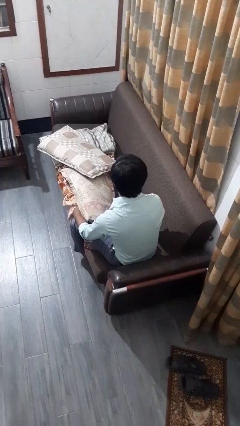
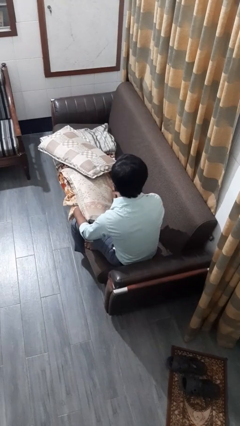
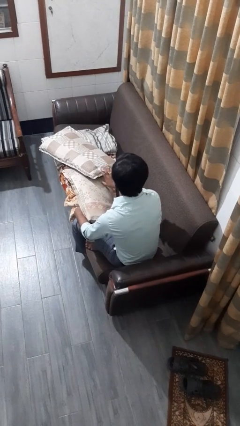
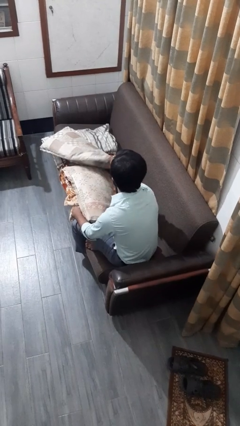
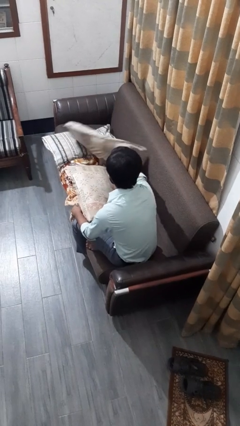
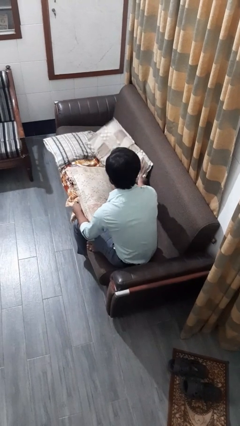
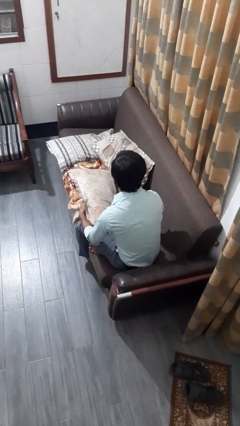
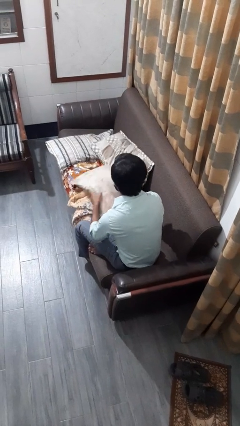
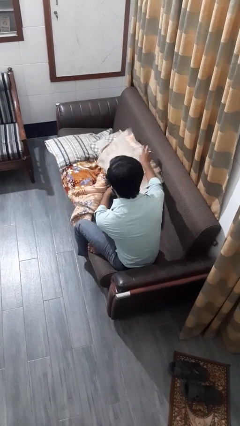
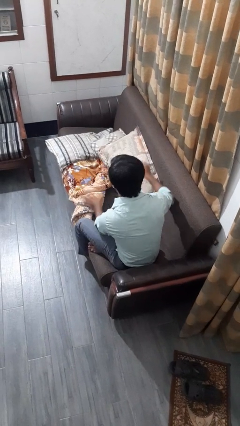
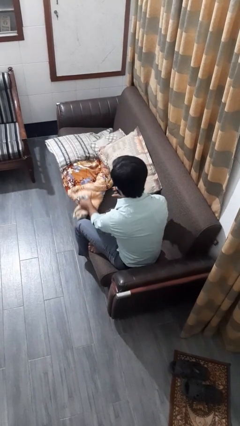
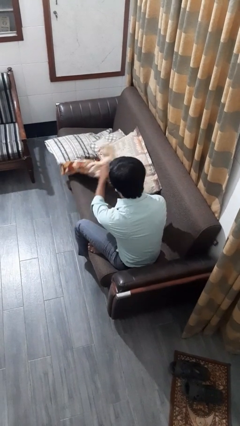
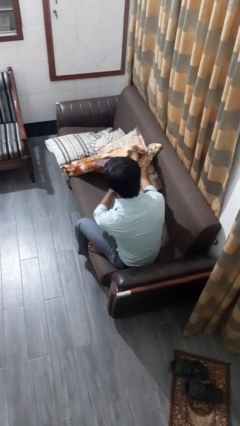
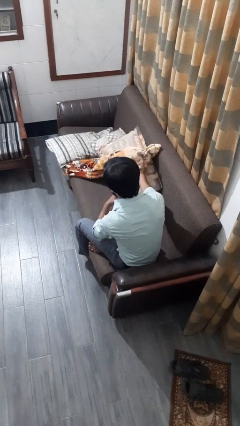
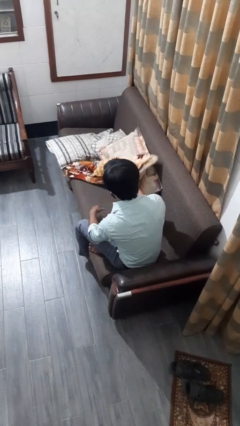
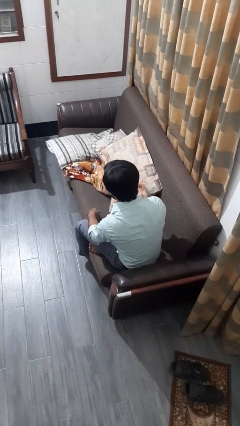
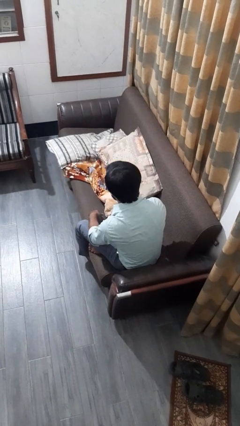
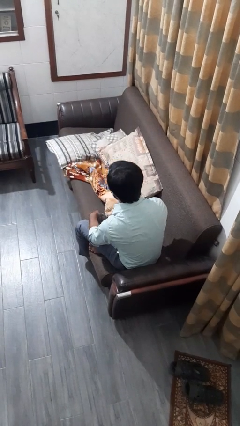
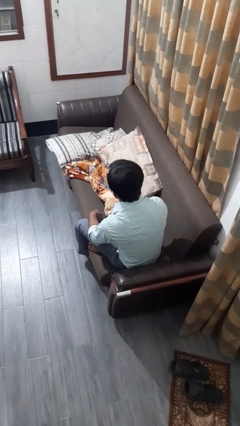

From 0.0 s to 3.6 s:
person searches in couch

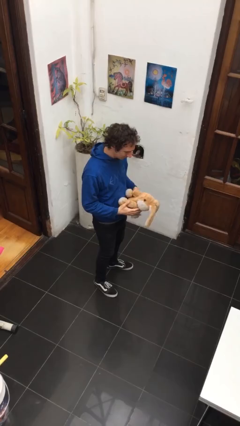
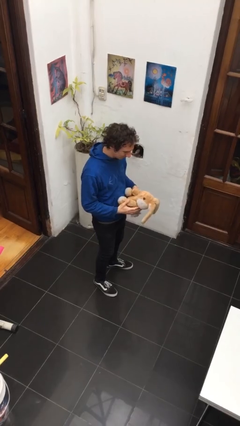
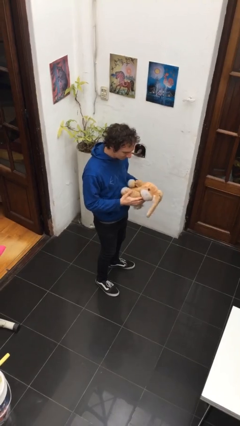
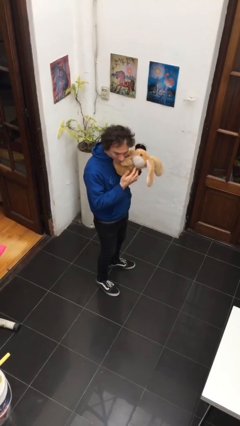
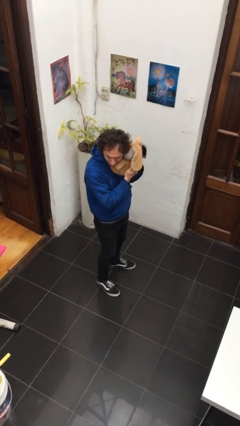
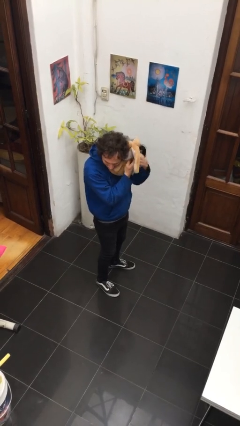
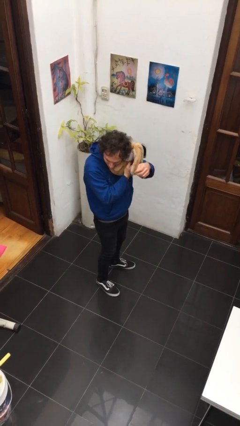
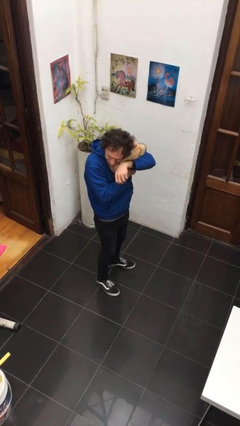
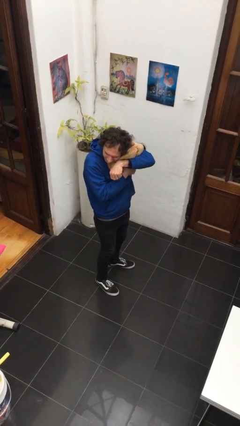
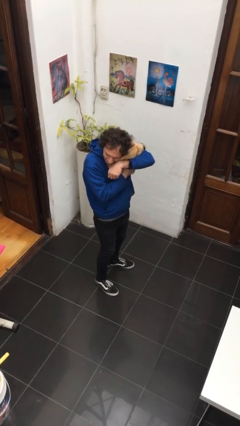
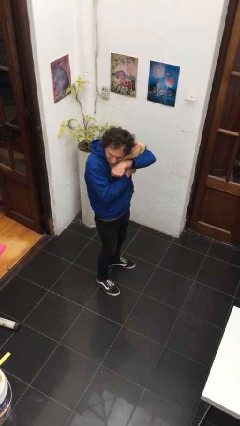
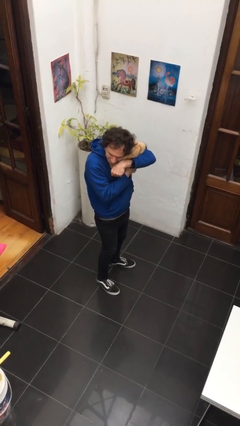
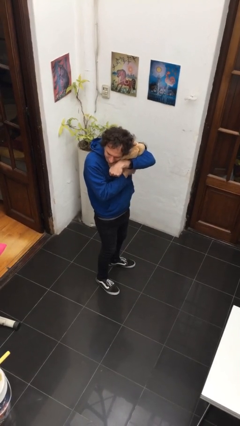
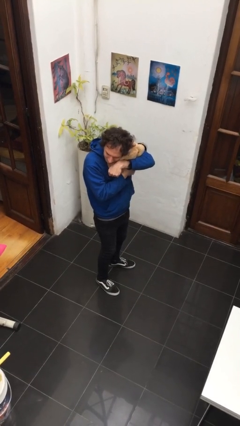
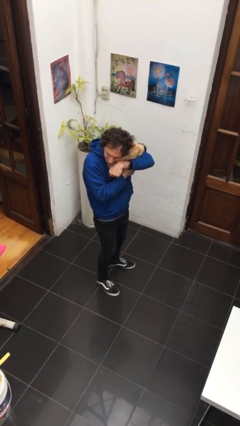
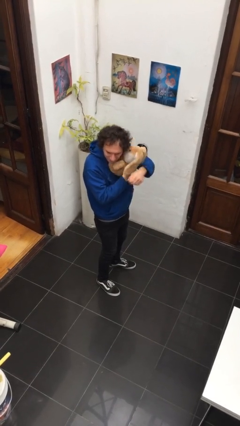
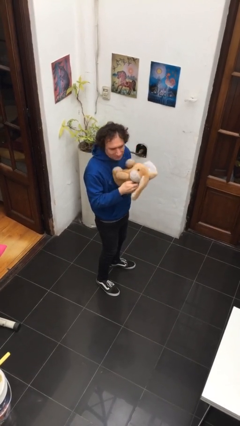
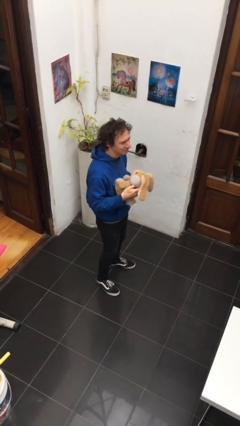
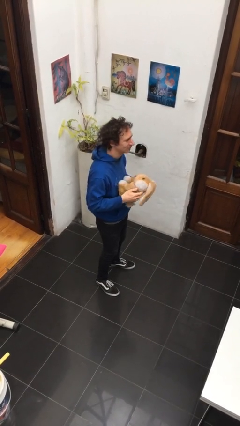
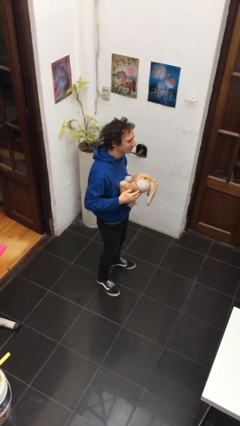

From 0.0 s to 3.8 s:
person hugs stuffed animal

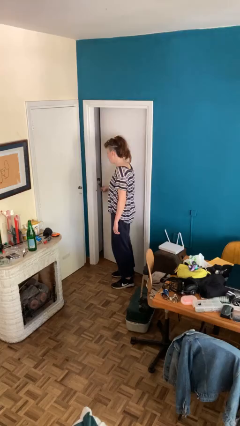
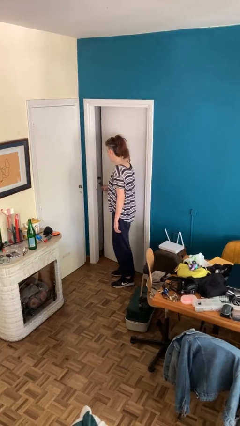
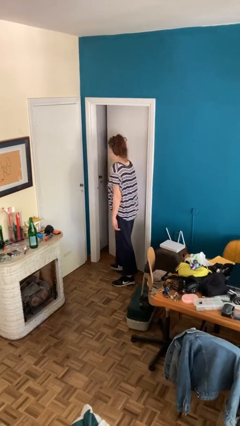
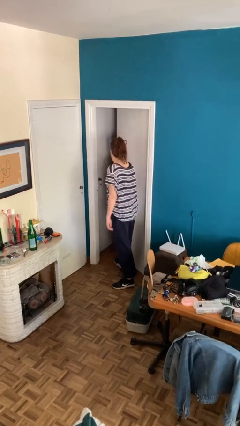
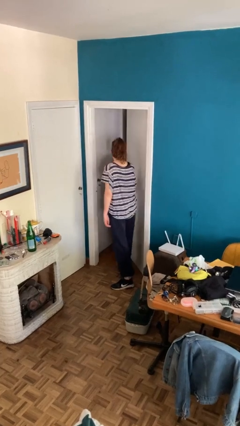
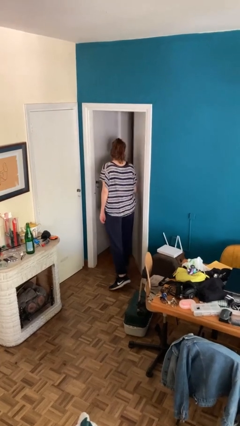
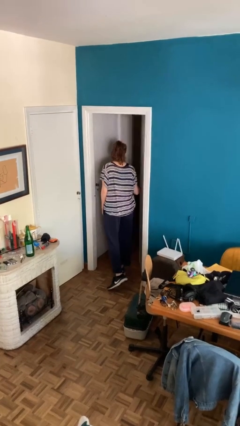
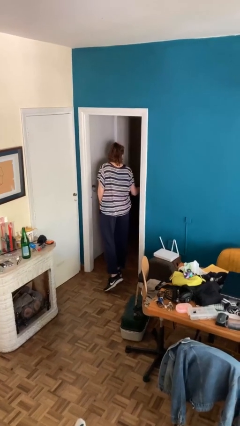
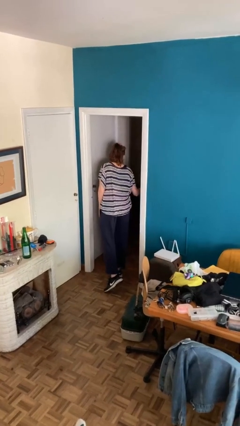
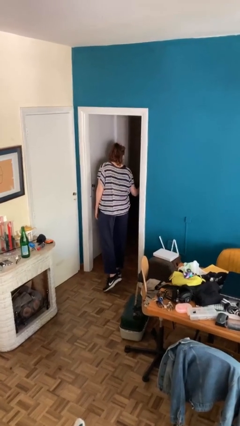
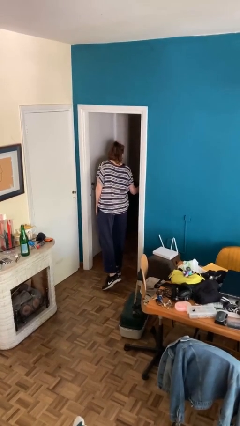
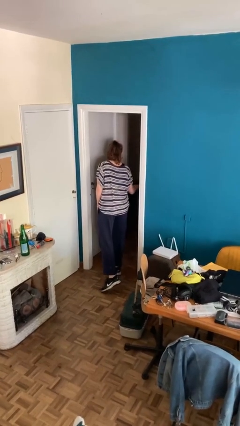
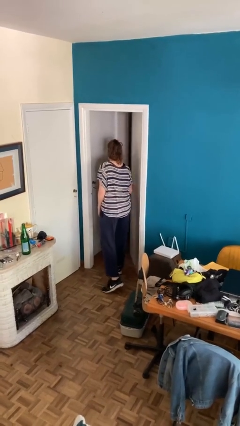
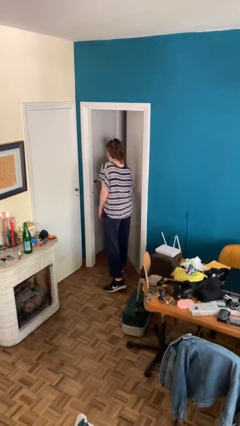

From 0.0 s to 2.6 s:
person opens facility door

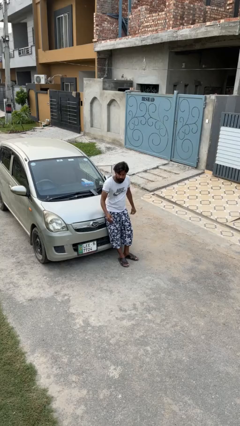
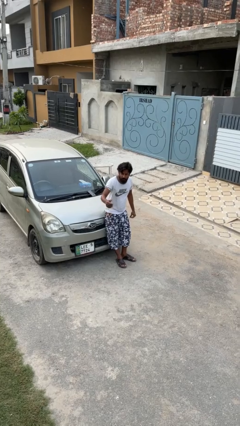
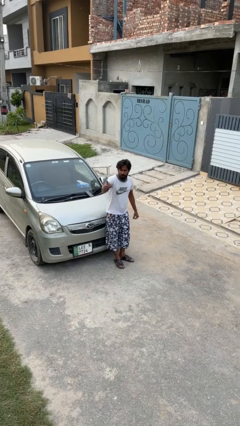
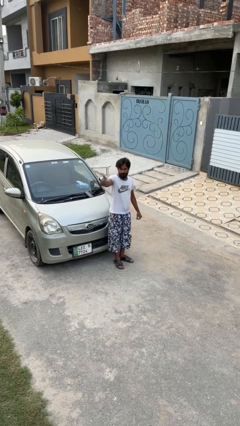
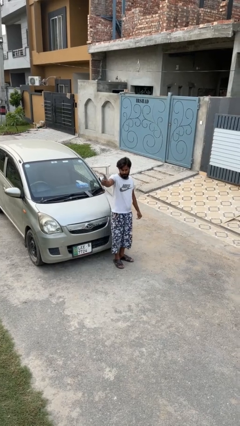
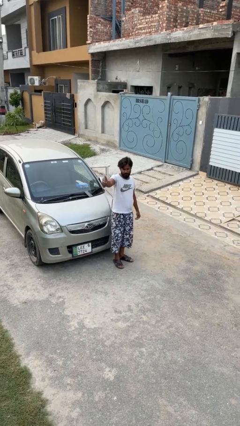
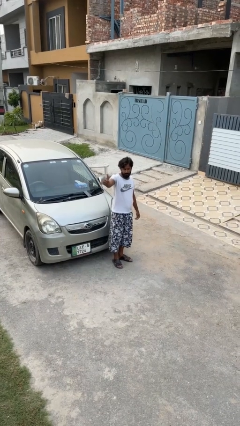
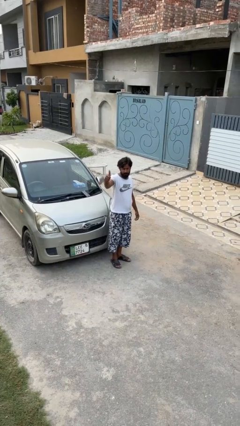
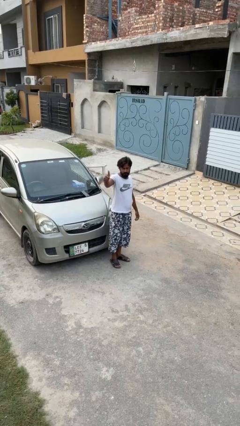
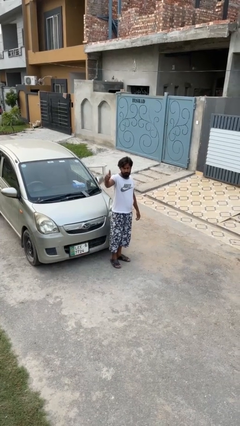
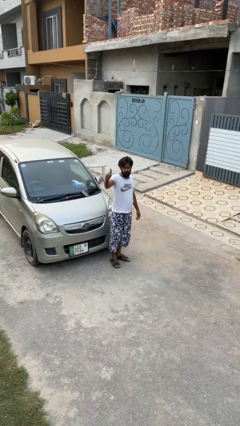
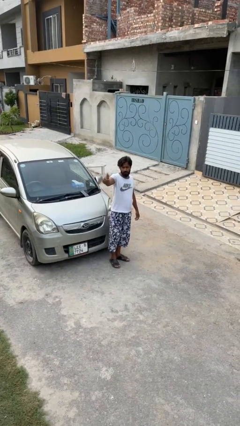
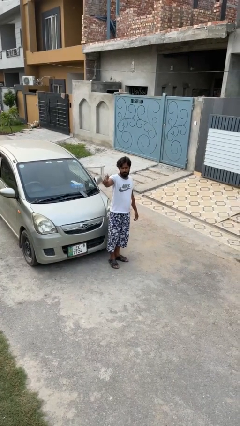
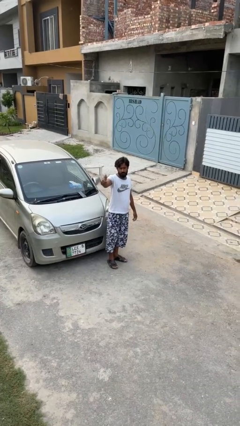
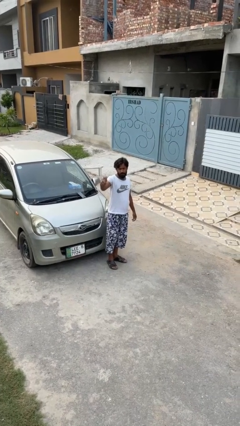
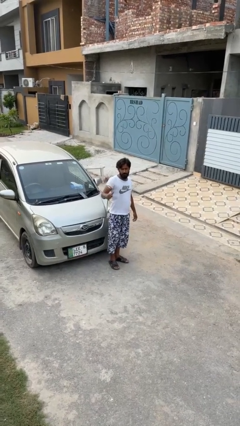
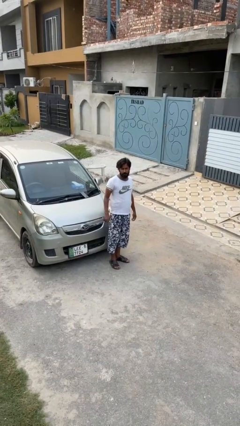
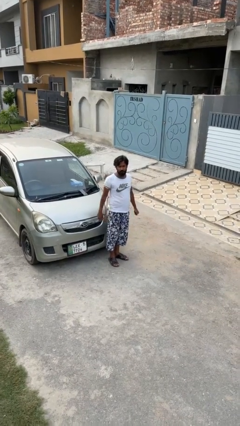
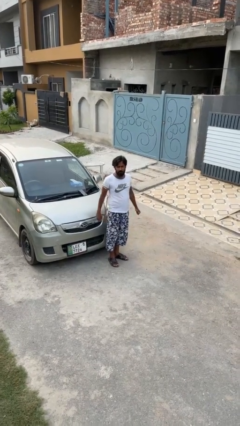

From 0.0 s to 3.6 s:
person gestures thumbs up

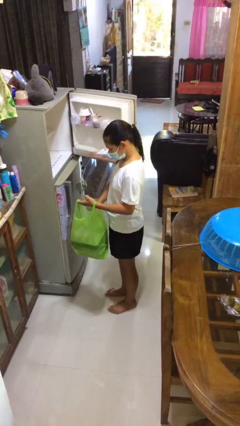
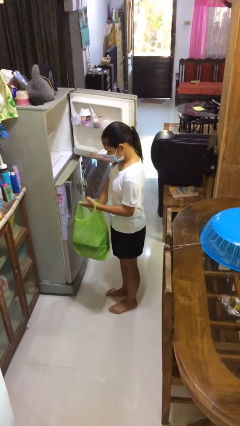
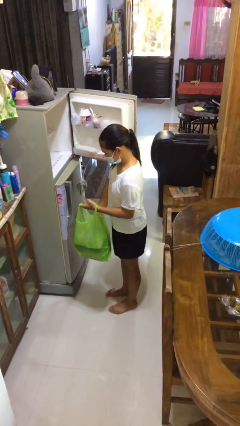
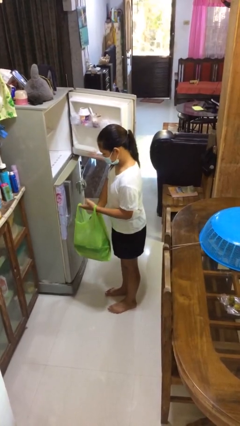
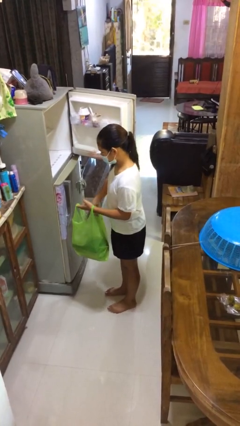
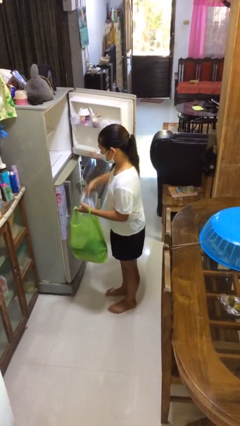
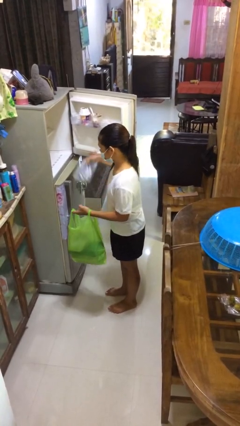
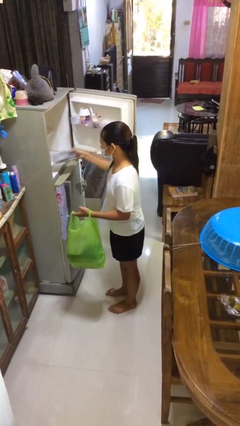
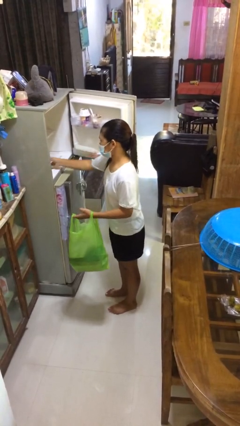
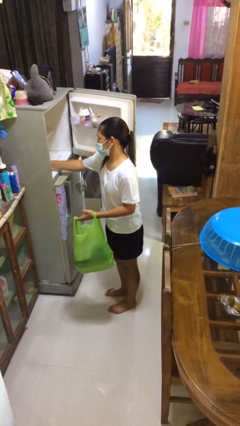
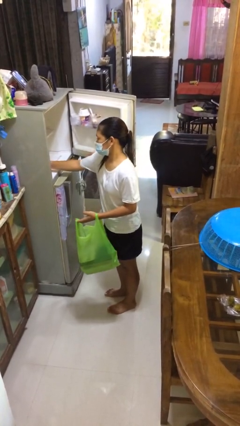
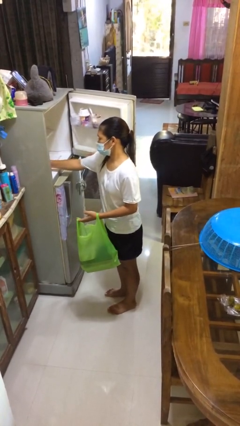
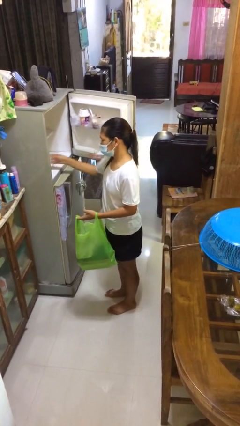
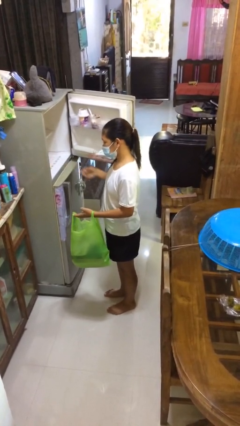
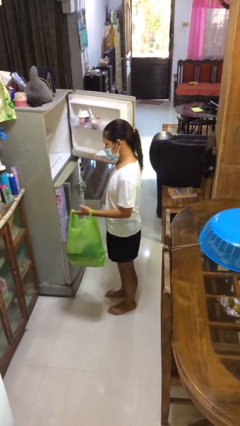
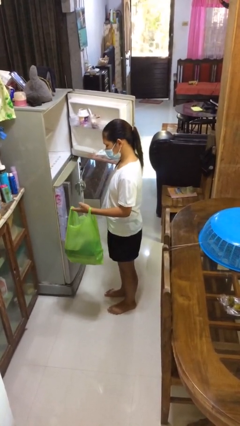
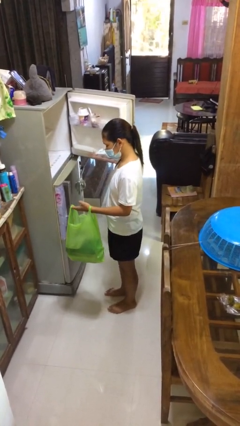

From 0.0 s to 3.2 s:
person loads groceries into refrigerator

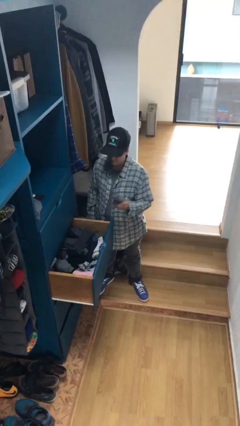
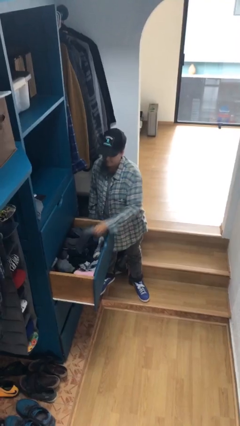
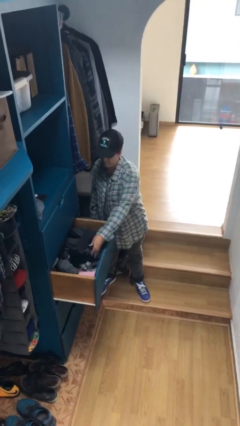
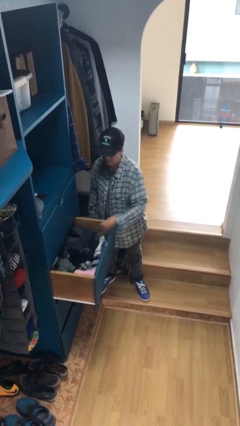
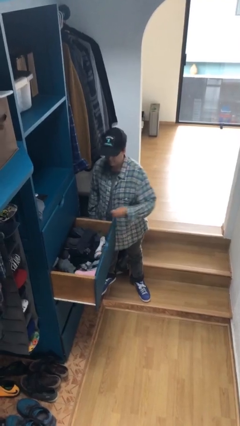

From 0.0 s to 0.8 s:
person puts clothes into dresser
